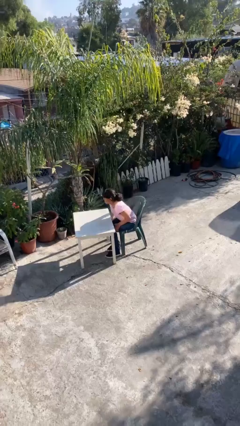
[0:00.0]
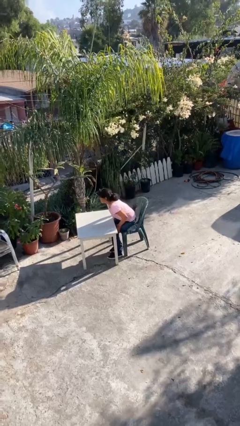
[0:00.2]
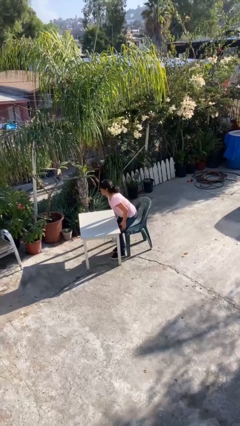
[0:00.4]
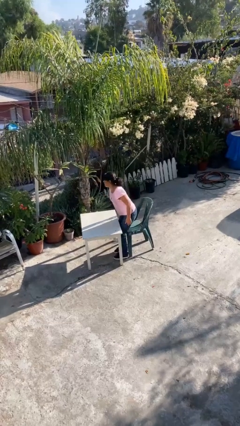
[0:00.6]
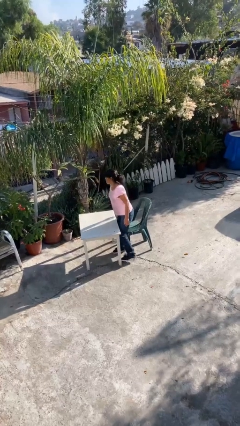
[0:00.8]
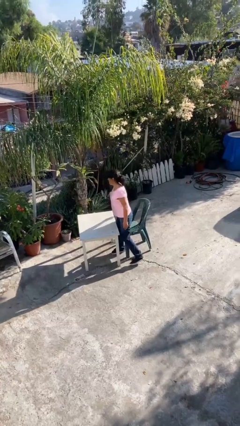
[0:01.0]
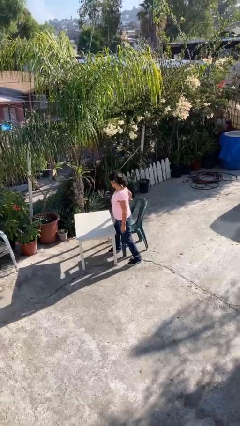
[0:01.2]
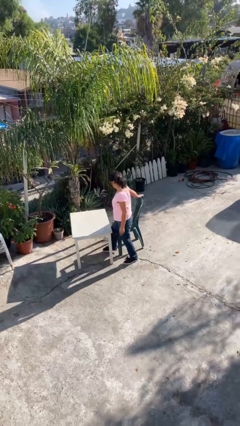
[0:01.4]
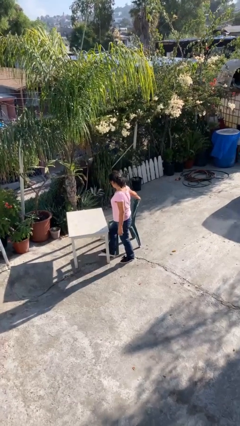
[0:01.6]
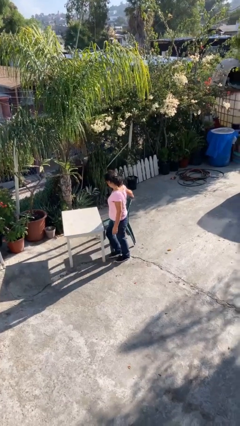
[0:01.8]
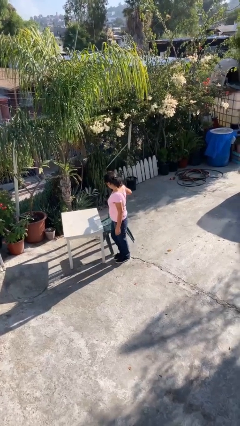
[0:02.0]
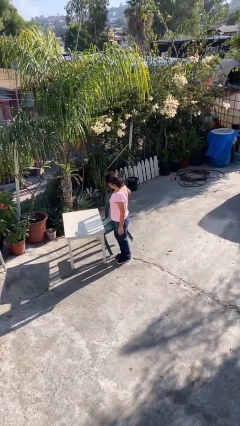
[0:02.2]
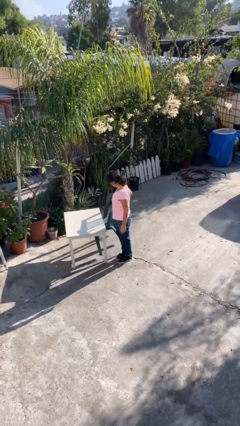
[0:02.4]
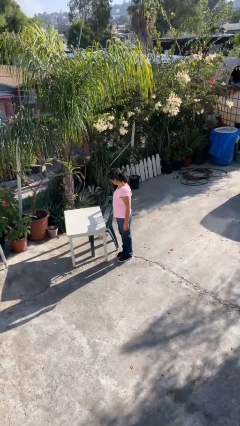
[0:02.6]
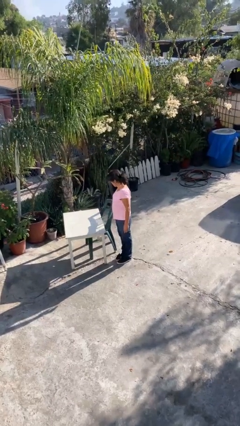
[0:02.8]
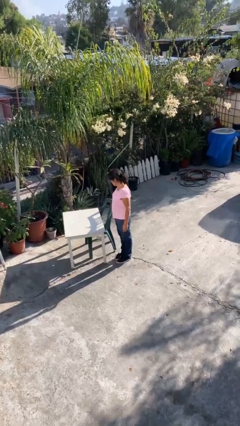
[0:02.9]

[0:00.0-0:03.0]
person stands up

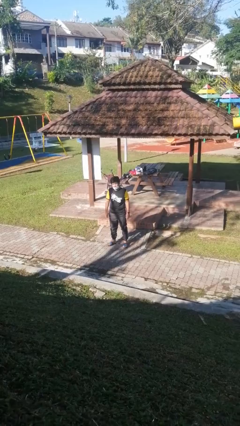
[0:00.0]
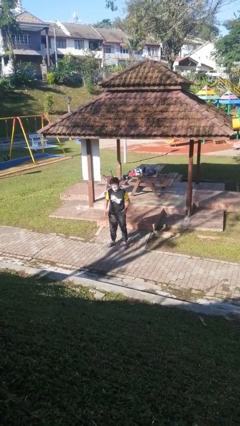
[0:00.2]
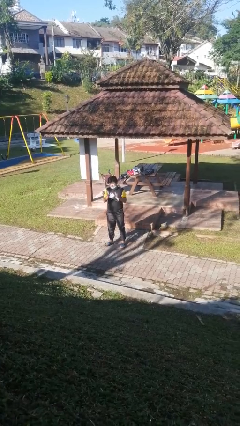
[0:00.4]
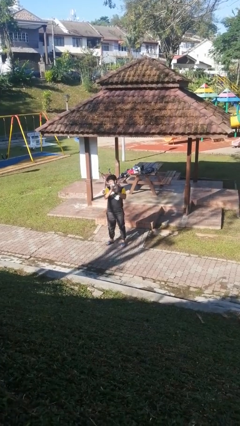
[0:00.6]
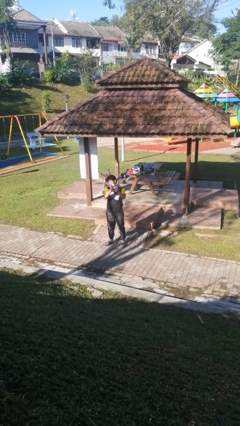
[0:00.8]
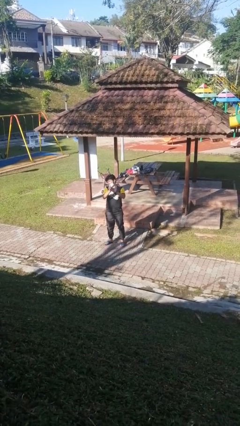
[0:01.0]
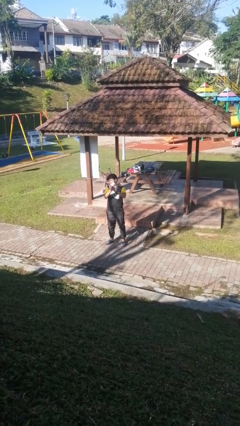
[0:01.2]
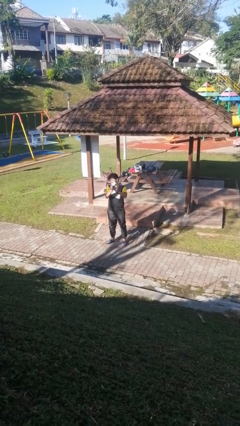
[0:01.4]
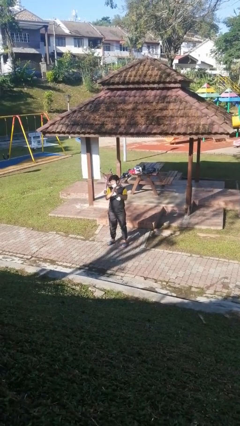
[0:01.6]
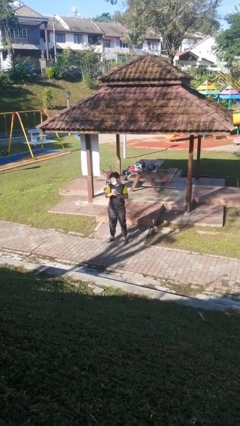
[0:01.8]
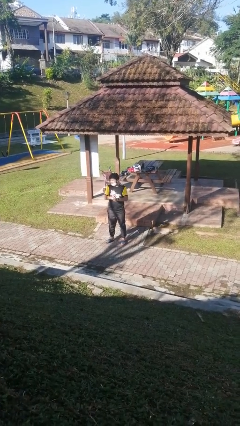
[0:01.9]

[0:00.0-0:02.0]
person claps hands

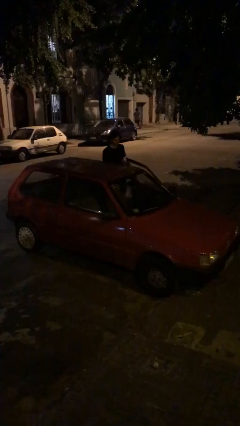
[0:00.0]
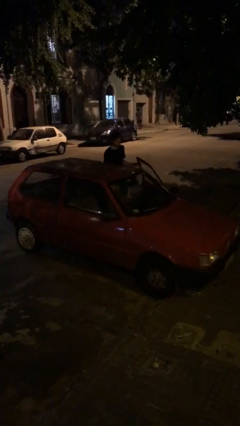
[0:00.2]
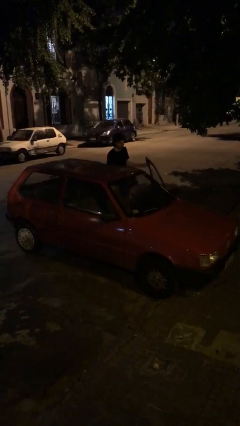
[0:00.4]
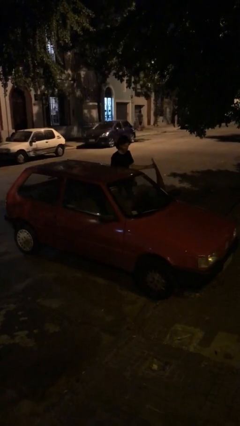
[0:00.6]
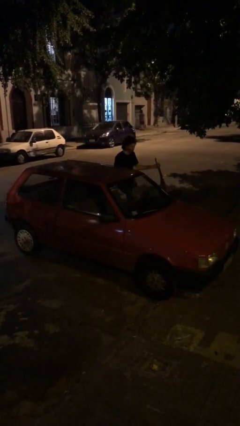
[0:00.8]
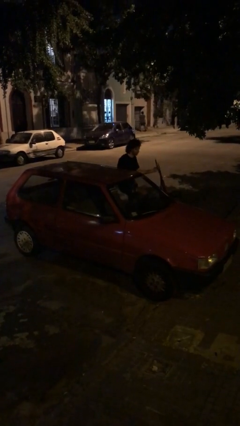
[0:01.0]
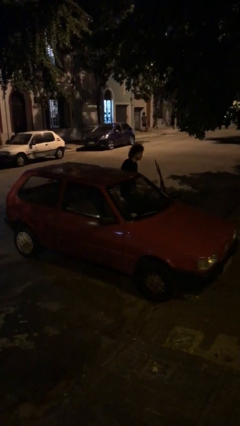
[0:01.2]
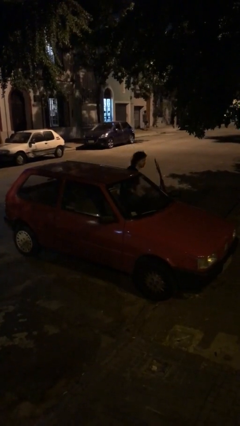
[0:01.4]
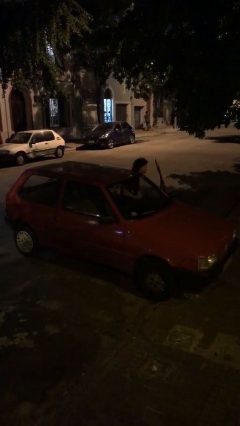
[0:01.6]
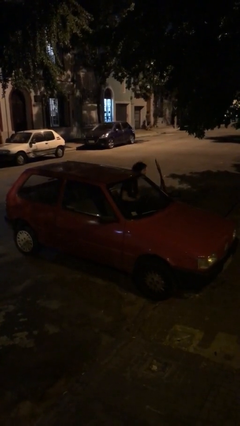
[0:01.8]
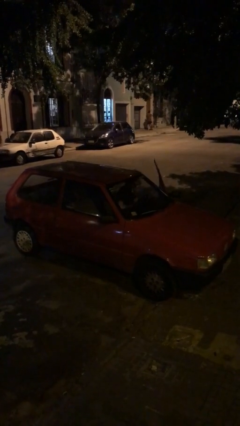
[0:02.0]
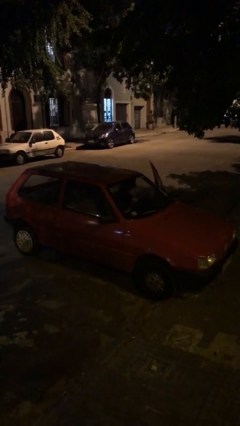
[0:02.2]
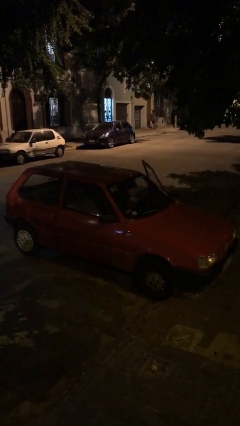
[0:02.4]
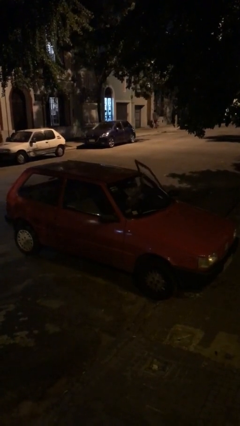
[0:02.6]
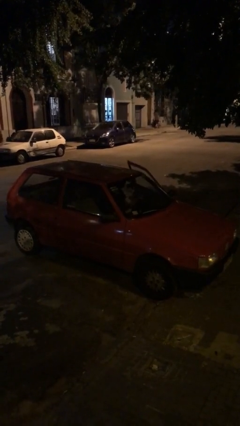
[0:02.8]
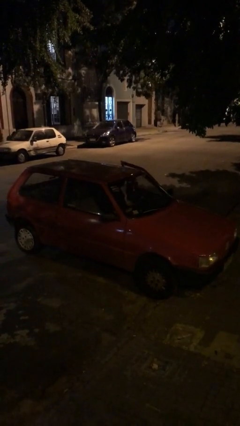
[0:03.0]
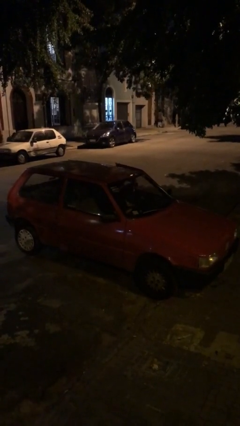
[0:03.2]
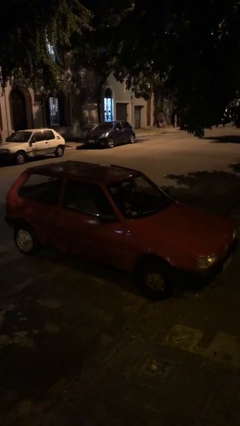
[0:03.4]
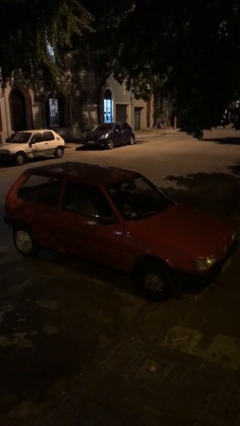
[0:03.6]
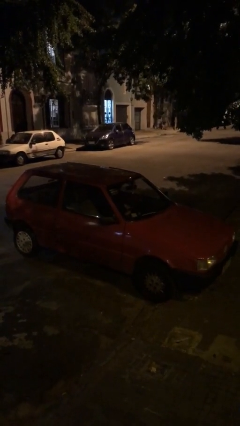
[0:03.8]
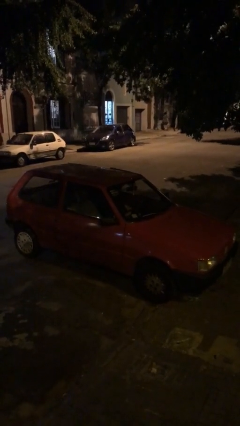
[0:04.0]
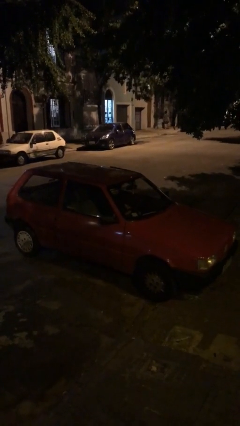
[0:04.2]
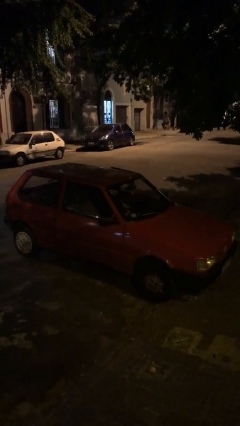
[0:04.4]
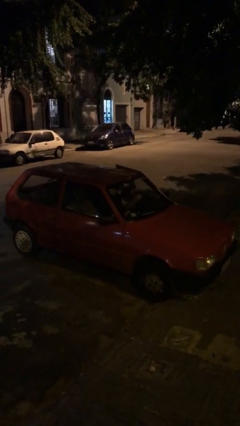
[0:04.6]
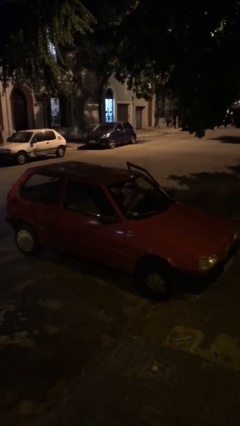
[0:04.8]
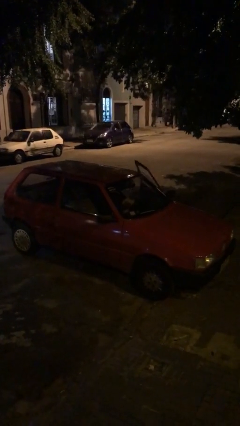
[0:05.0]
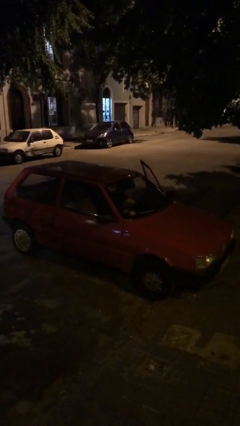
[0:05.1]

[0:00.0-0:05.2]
car picks up person

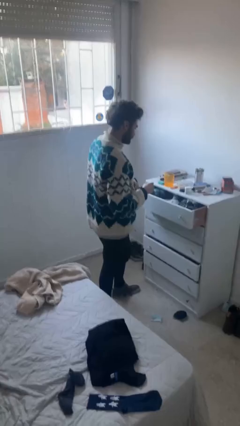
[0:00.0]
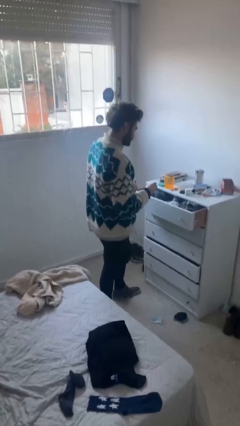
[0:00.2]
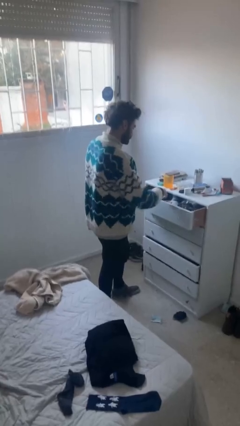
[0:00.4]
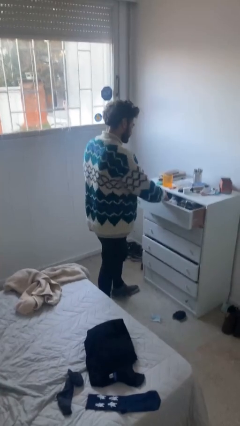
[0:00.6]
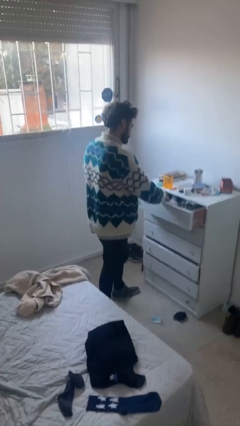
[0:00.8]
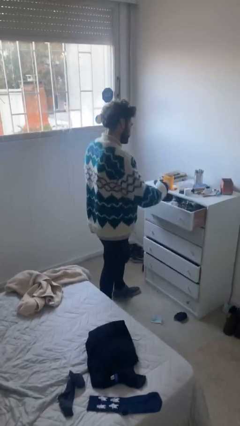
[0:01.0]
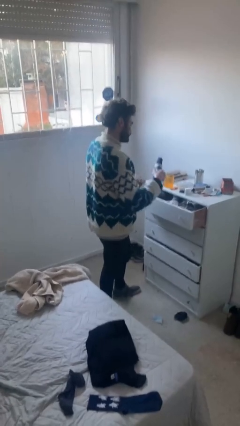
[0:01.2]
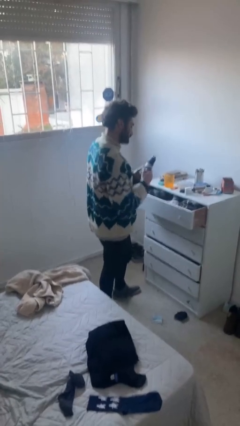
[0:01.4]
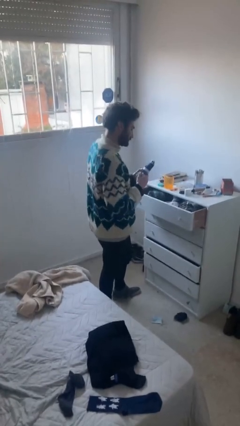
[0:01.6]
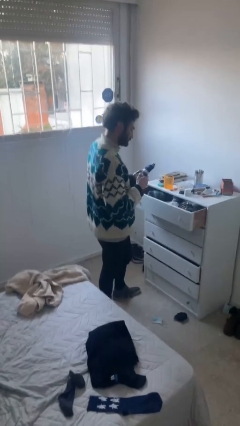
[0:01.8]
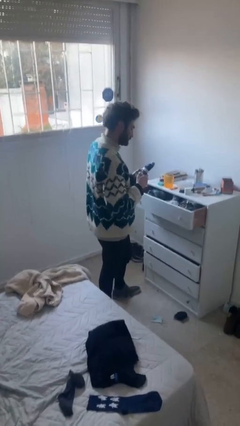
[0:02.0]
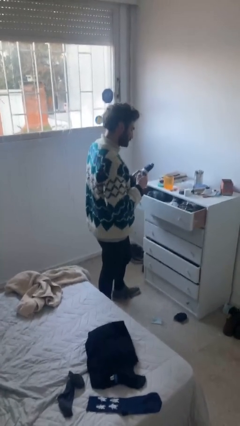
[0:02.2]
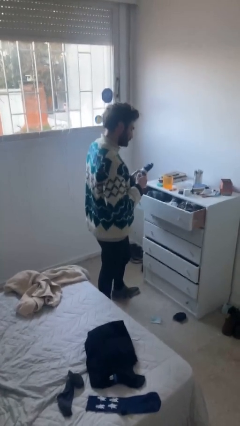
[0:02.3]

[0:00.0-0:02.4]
person takes clothes from dresser

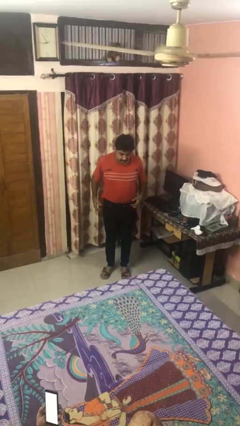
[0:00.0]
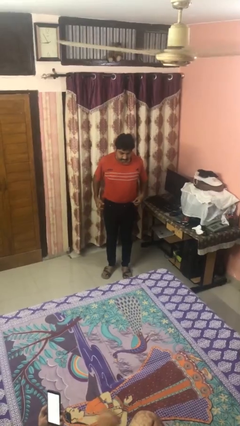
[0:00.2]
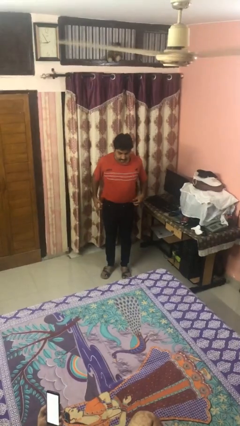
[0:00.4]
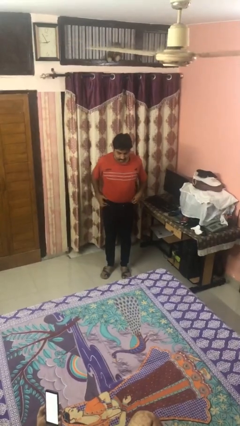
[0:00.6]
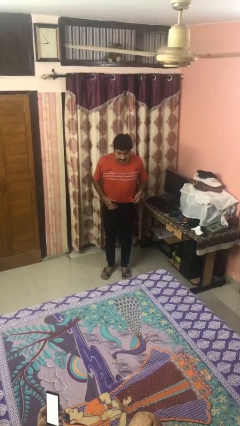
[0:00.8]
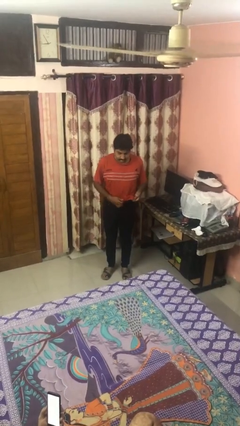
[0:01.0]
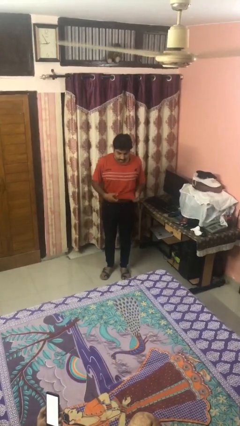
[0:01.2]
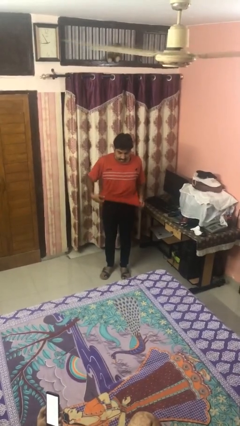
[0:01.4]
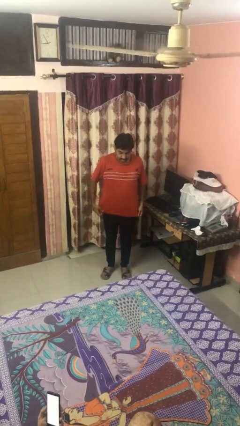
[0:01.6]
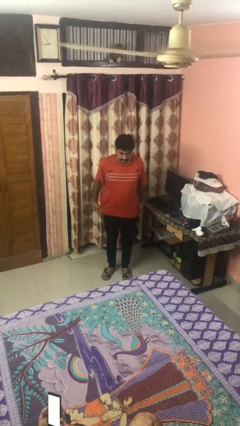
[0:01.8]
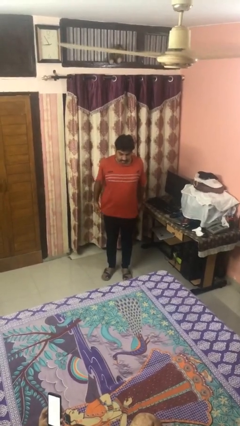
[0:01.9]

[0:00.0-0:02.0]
person untucks shirt

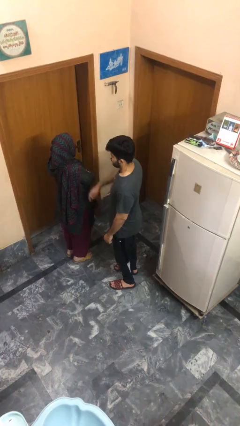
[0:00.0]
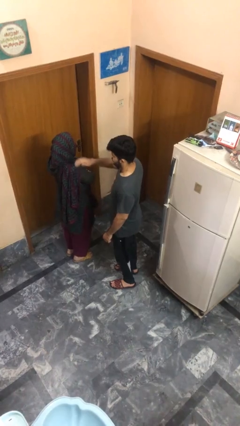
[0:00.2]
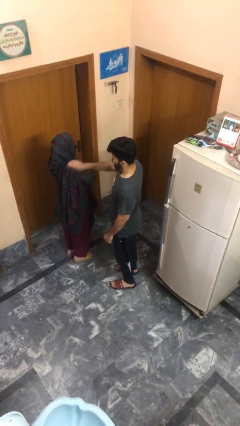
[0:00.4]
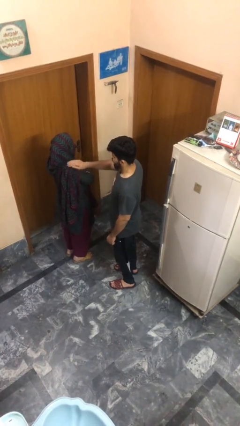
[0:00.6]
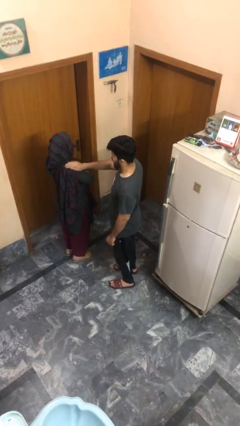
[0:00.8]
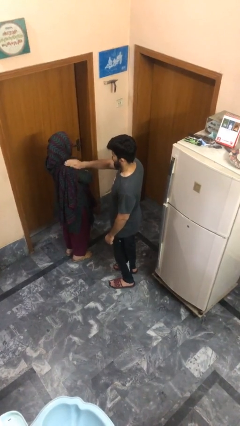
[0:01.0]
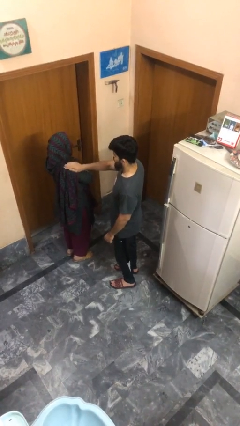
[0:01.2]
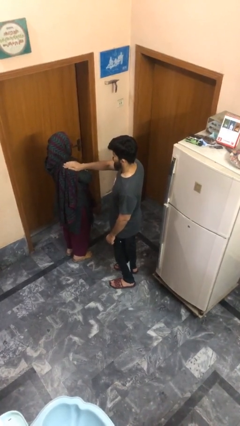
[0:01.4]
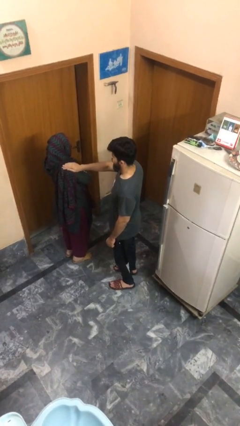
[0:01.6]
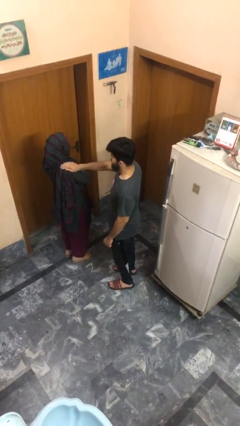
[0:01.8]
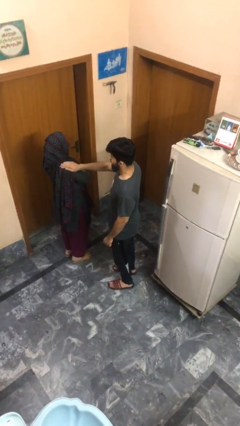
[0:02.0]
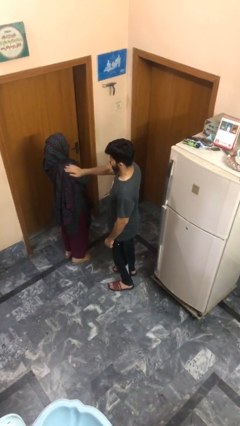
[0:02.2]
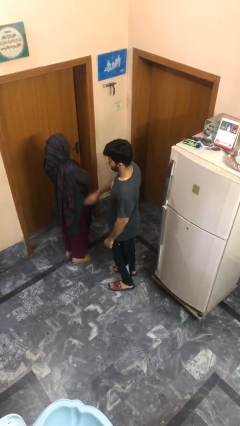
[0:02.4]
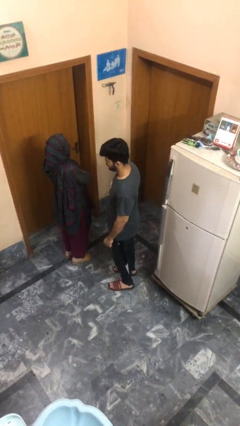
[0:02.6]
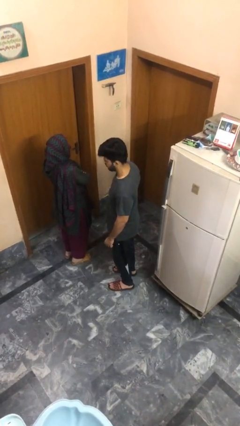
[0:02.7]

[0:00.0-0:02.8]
person pounds shoulders of person
